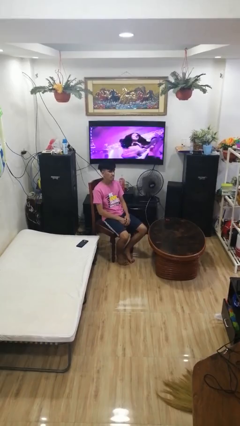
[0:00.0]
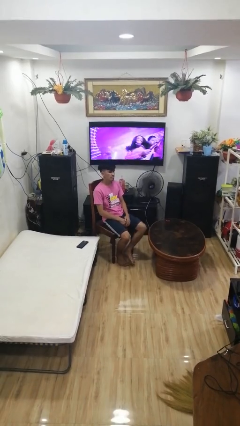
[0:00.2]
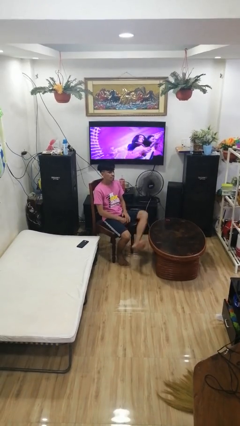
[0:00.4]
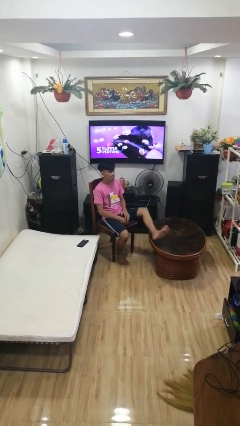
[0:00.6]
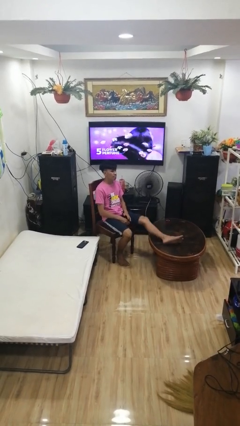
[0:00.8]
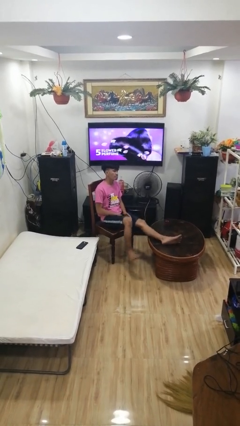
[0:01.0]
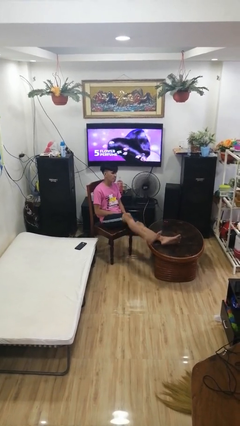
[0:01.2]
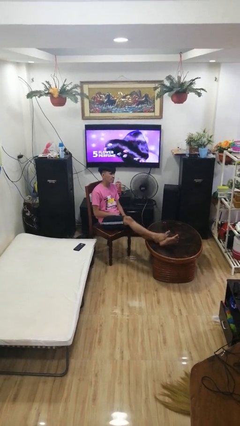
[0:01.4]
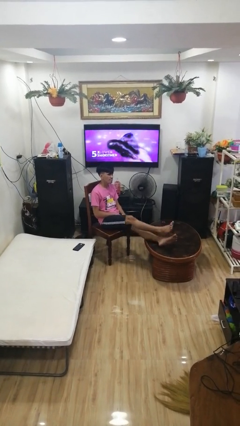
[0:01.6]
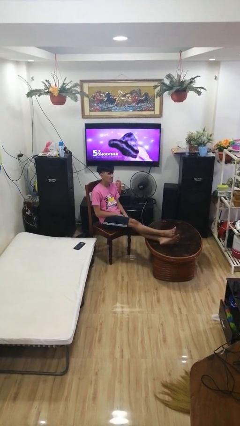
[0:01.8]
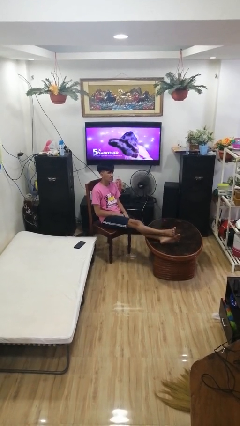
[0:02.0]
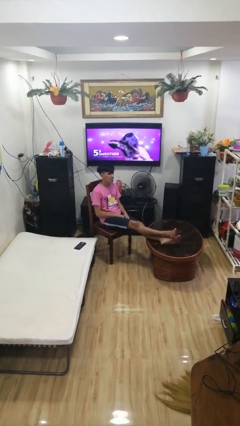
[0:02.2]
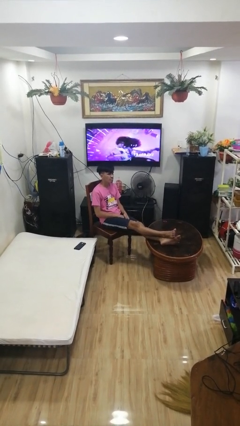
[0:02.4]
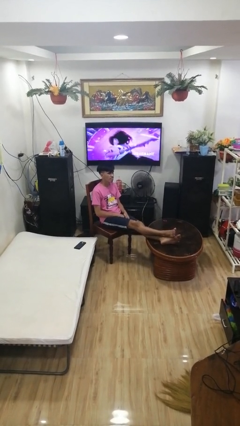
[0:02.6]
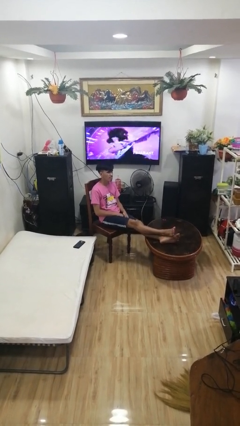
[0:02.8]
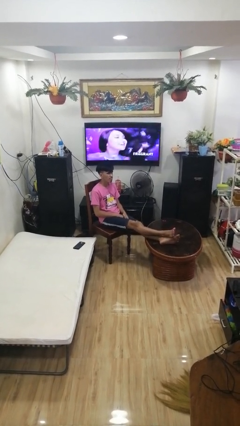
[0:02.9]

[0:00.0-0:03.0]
person puts feet up

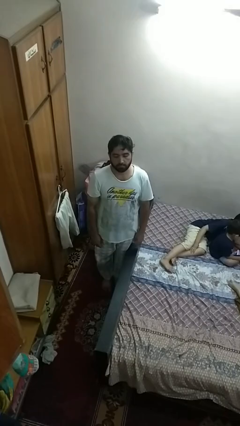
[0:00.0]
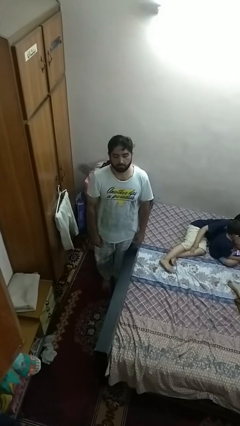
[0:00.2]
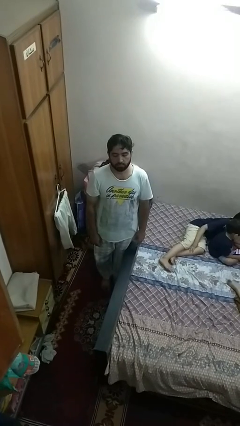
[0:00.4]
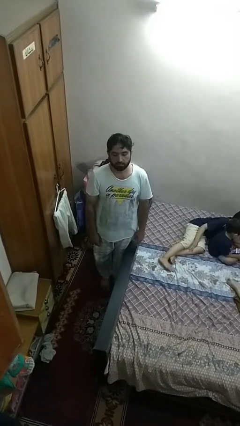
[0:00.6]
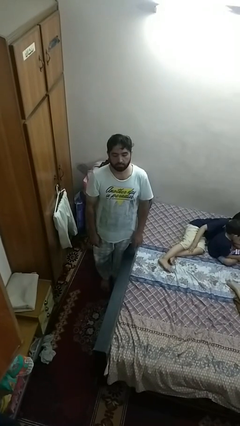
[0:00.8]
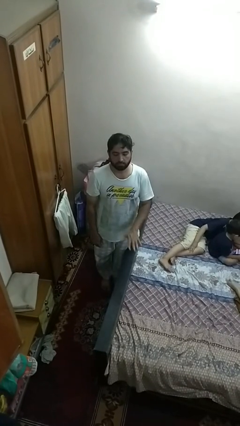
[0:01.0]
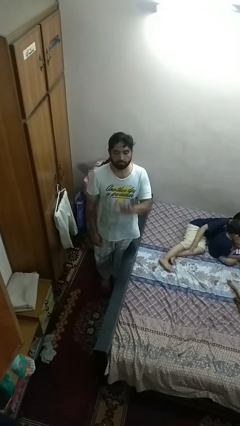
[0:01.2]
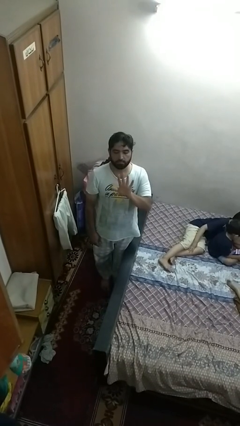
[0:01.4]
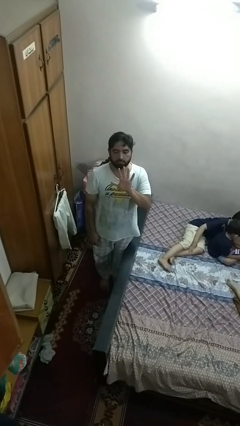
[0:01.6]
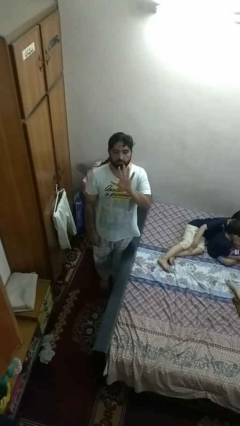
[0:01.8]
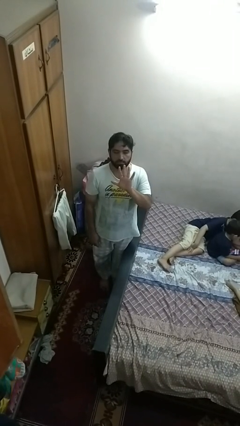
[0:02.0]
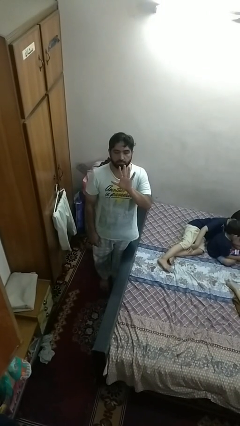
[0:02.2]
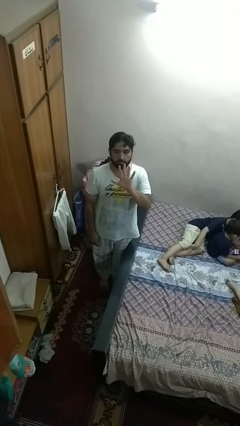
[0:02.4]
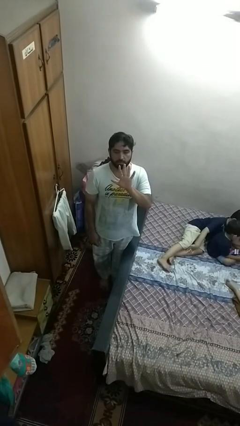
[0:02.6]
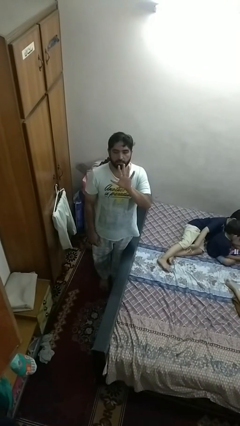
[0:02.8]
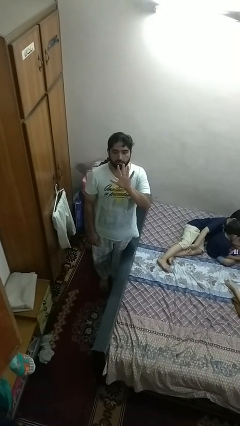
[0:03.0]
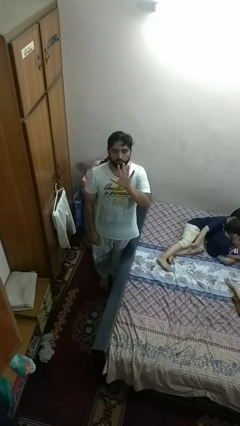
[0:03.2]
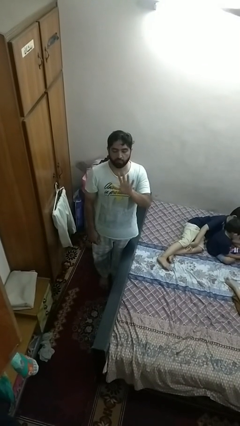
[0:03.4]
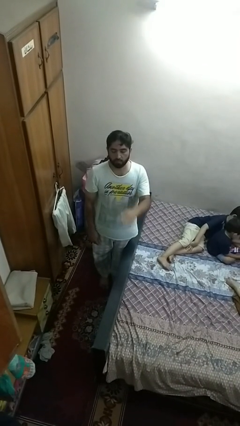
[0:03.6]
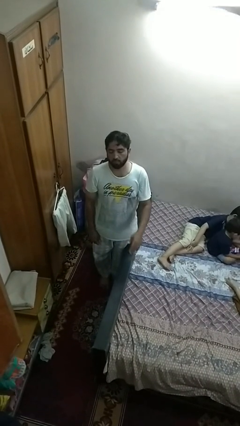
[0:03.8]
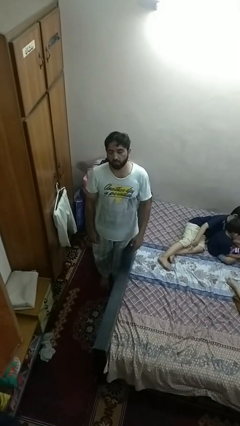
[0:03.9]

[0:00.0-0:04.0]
person gestures number five

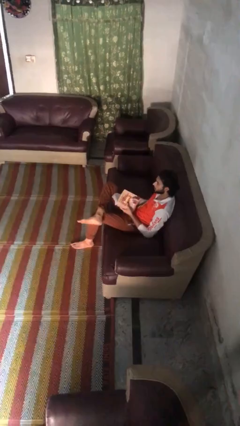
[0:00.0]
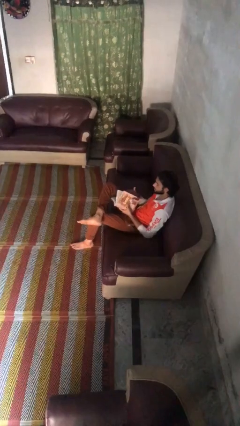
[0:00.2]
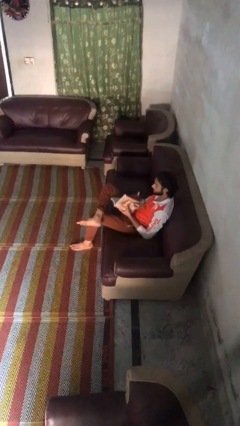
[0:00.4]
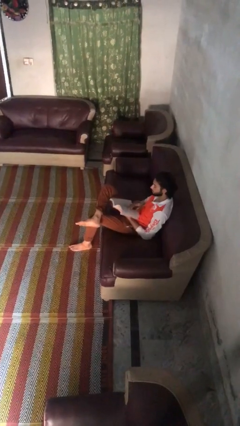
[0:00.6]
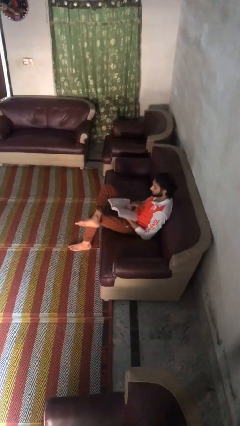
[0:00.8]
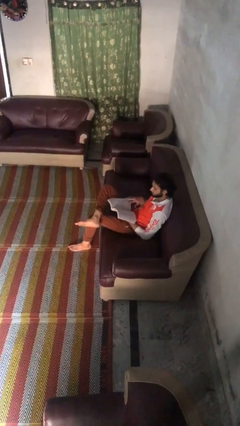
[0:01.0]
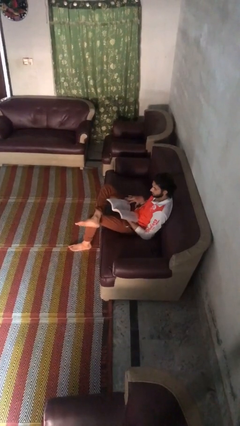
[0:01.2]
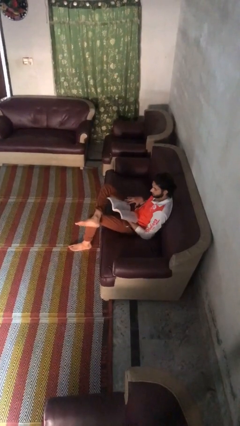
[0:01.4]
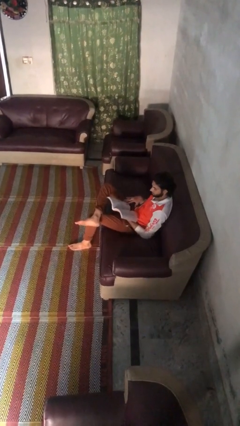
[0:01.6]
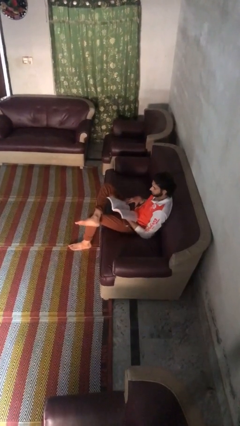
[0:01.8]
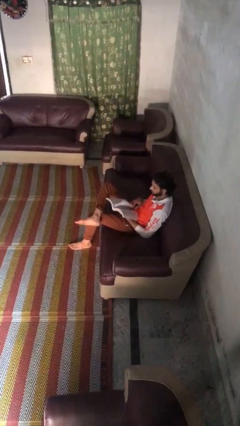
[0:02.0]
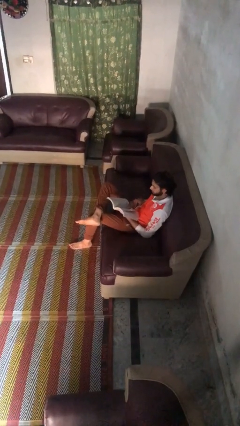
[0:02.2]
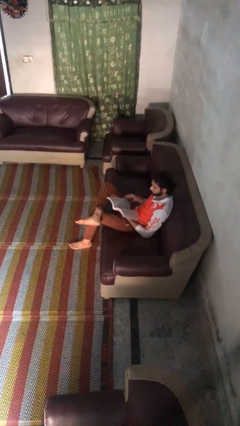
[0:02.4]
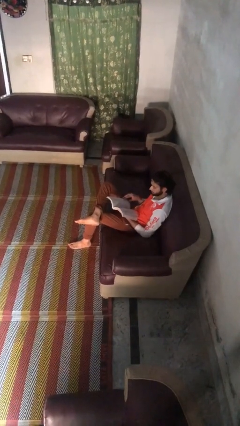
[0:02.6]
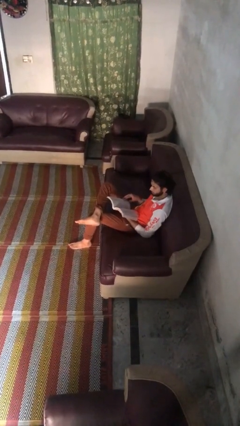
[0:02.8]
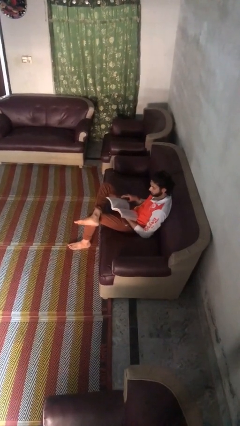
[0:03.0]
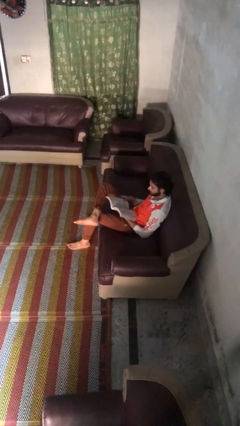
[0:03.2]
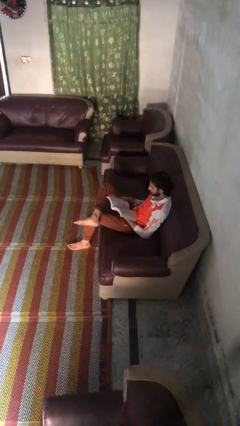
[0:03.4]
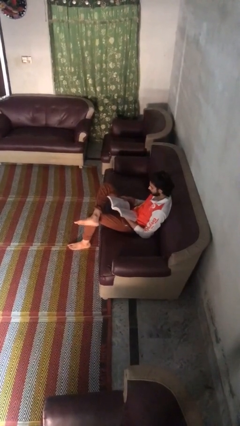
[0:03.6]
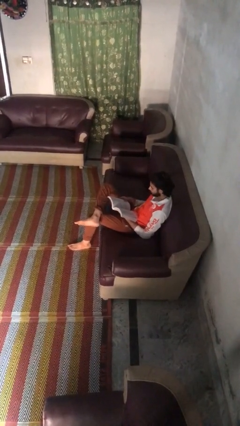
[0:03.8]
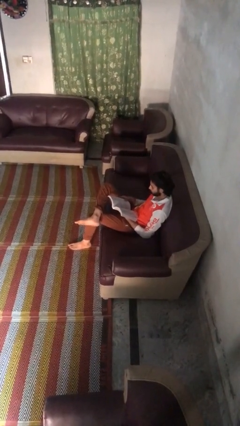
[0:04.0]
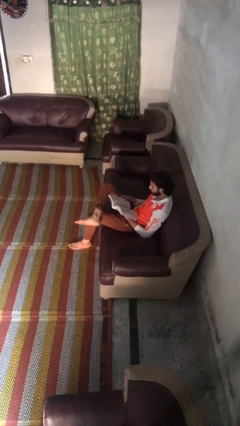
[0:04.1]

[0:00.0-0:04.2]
person reads book

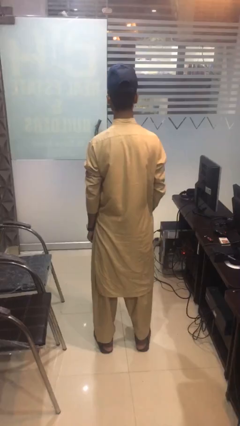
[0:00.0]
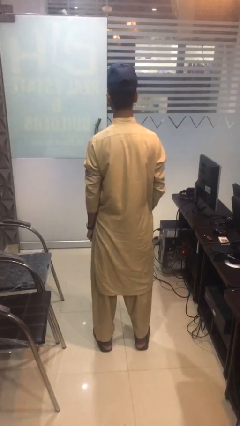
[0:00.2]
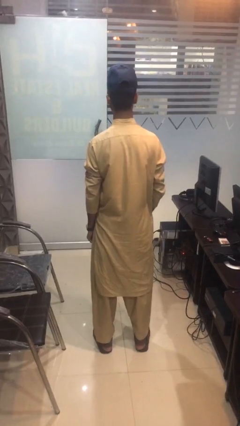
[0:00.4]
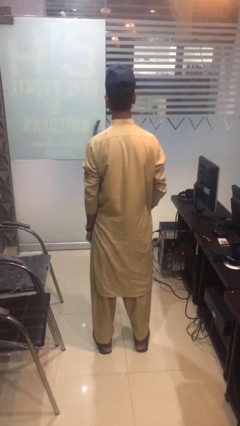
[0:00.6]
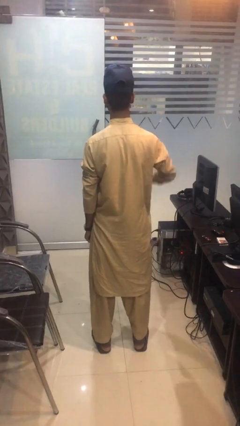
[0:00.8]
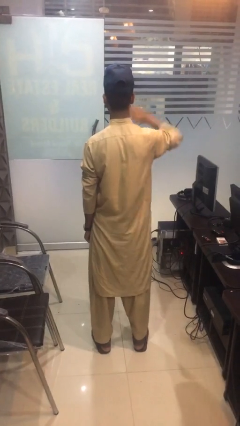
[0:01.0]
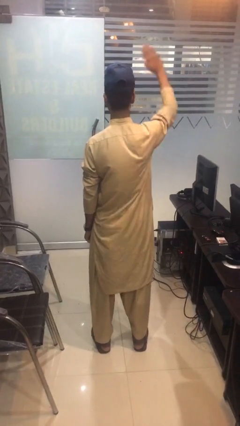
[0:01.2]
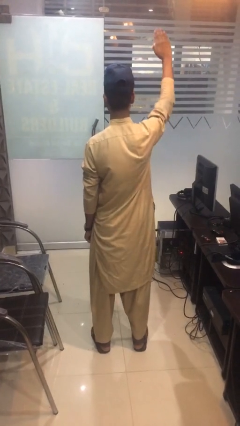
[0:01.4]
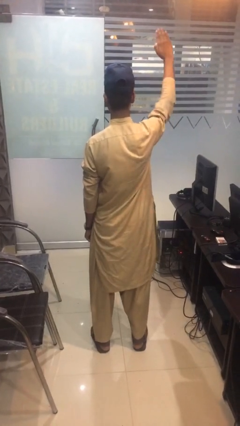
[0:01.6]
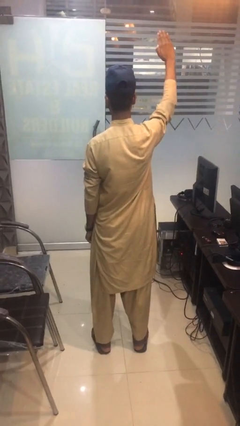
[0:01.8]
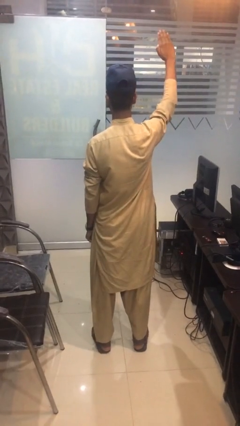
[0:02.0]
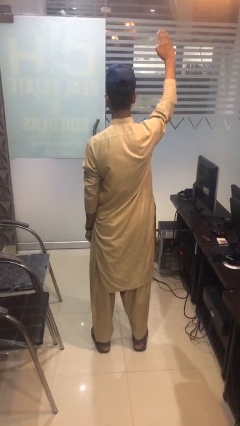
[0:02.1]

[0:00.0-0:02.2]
person gestures swipe up

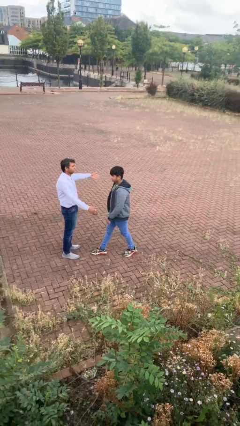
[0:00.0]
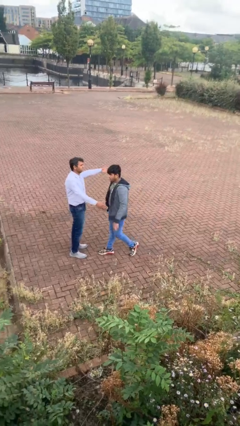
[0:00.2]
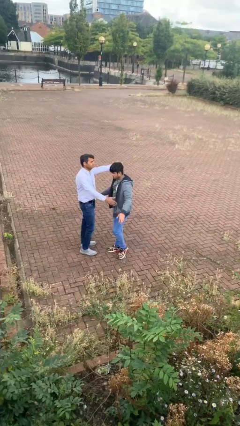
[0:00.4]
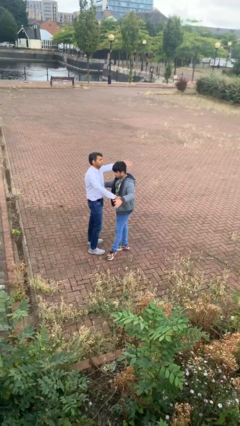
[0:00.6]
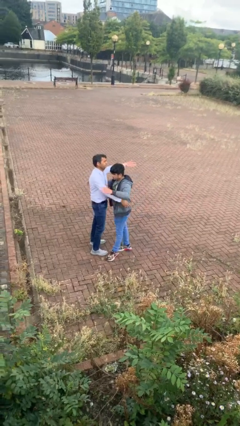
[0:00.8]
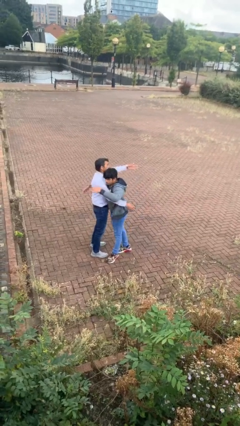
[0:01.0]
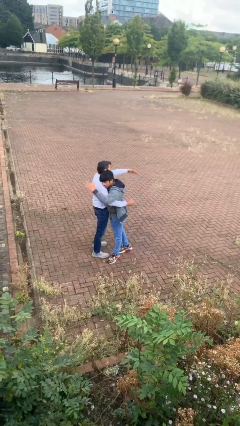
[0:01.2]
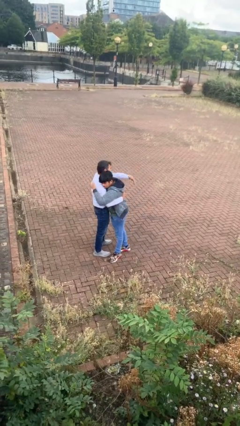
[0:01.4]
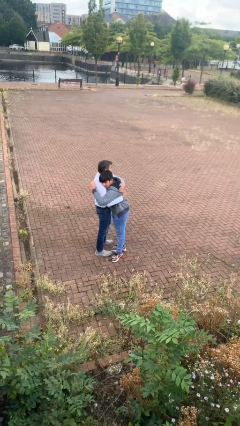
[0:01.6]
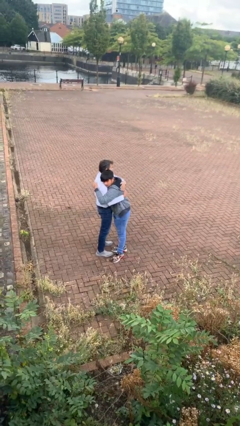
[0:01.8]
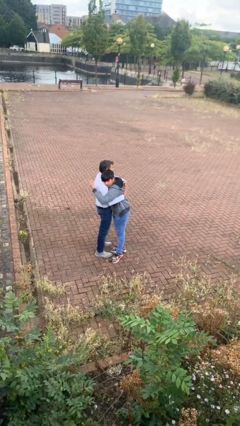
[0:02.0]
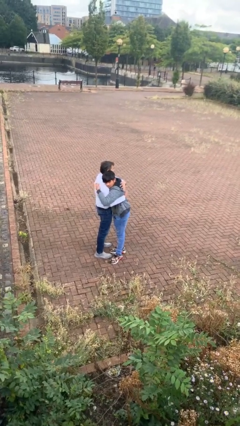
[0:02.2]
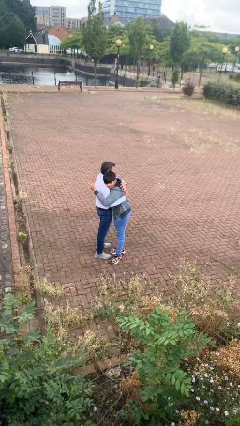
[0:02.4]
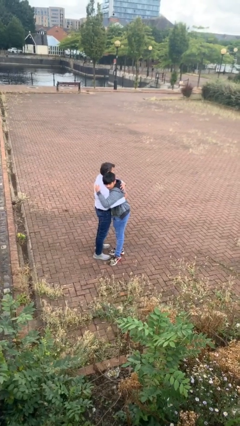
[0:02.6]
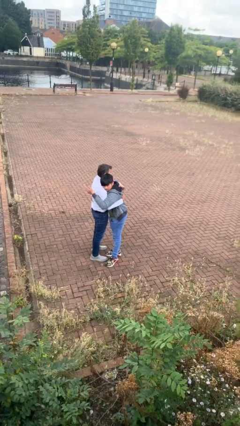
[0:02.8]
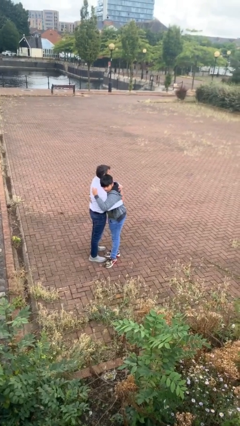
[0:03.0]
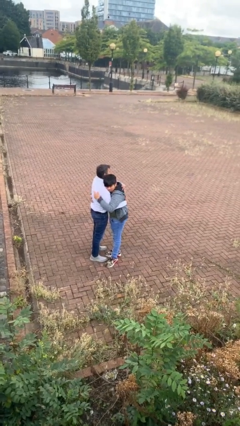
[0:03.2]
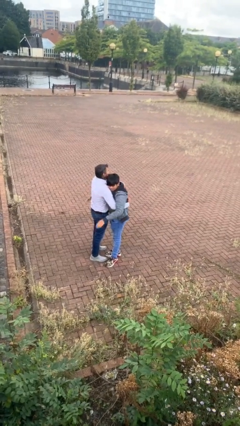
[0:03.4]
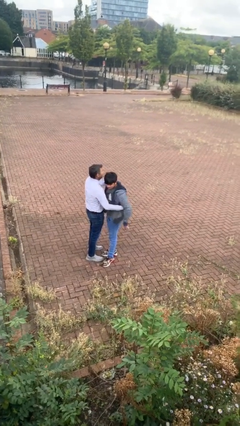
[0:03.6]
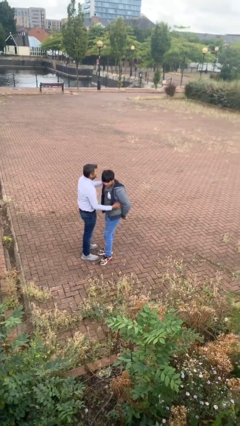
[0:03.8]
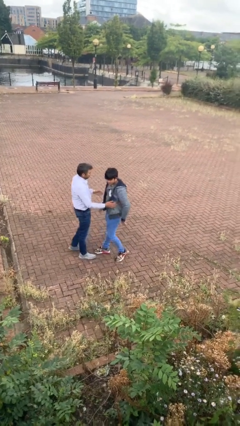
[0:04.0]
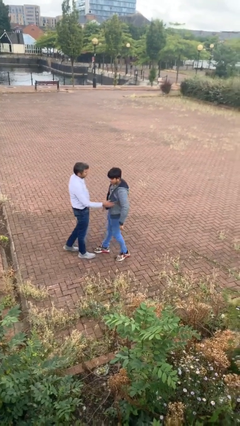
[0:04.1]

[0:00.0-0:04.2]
person embraces person
